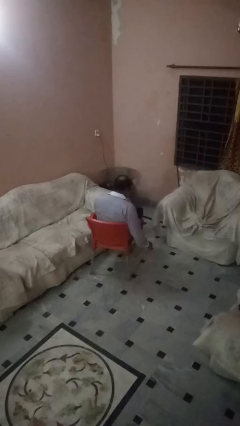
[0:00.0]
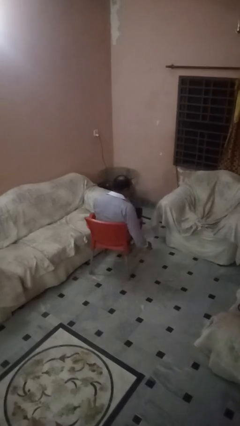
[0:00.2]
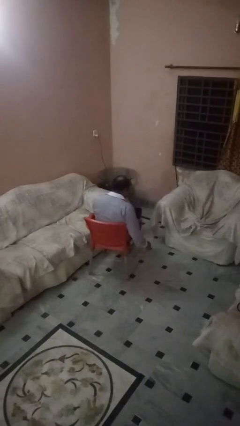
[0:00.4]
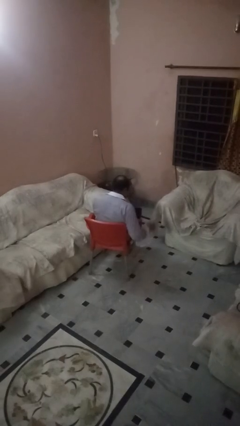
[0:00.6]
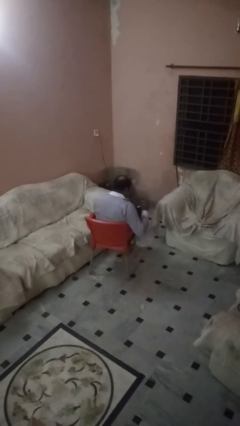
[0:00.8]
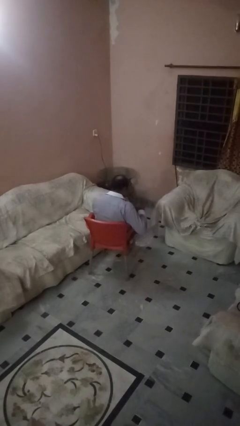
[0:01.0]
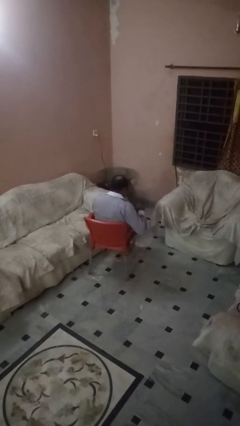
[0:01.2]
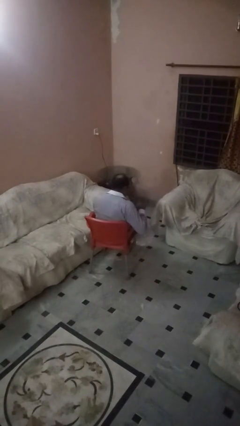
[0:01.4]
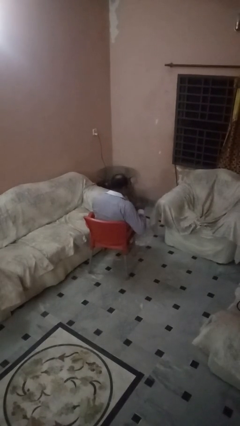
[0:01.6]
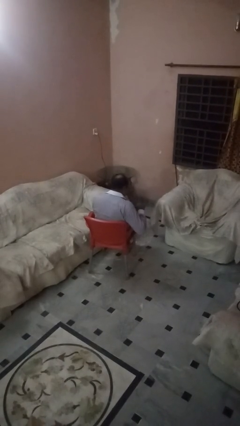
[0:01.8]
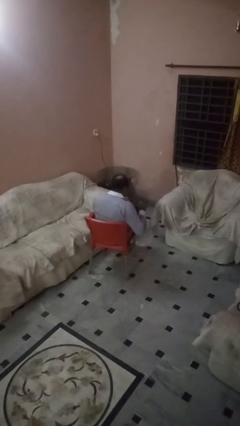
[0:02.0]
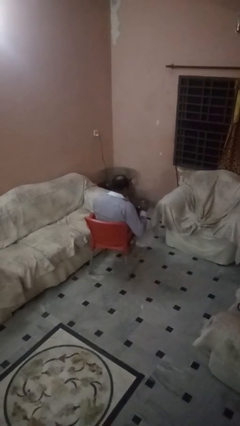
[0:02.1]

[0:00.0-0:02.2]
person stirs mug

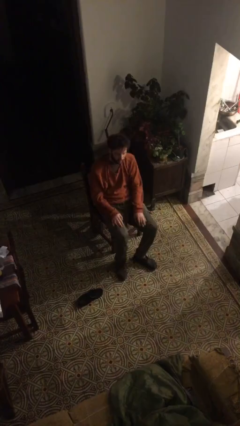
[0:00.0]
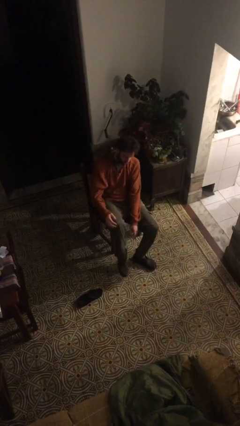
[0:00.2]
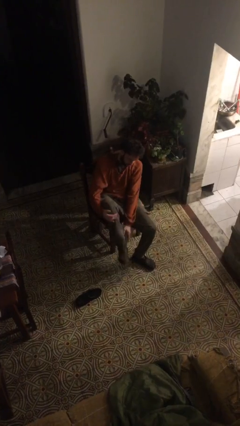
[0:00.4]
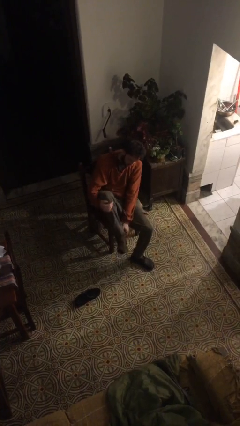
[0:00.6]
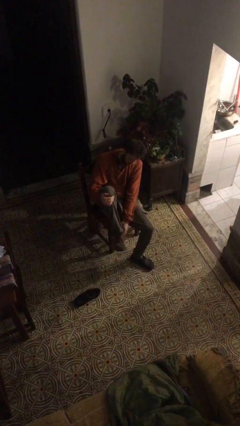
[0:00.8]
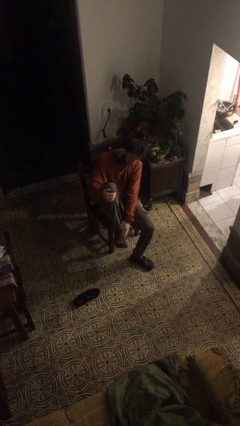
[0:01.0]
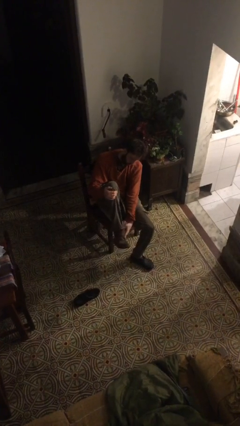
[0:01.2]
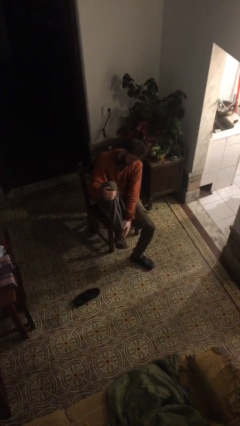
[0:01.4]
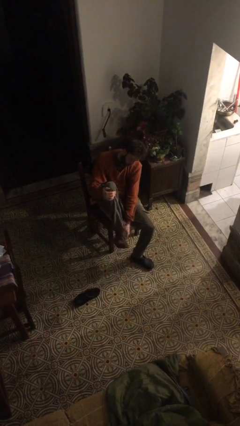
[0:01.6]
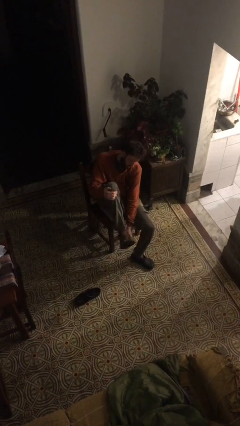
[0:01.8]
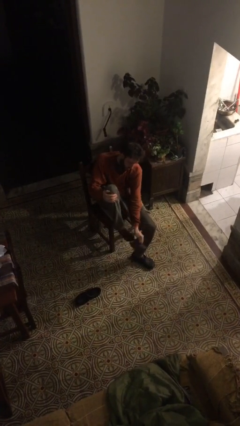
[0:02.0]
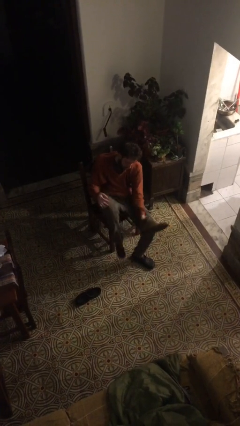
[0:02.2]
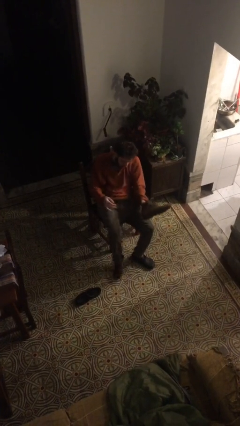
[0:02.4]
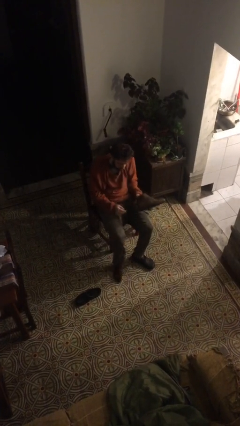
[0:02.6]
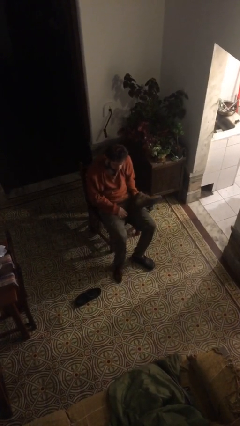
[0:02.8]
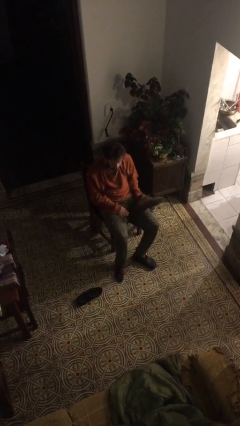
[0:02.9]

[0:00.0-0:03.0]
person takes off boots

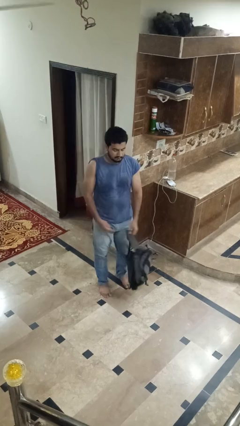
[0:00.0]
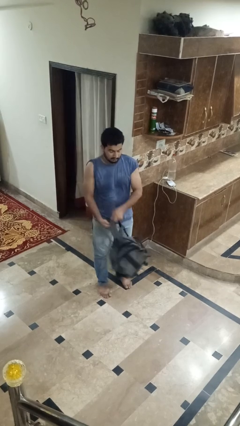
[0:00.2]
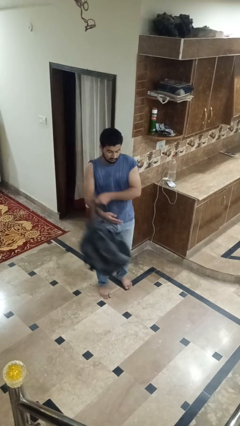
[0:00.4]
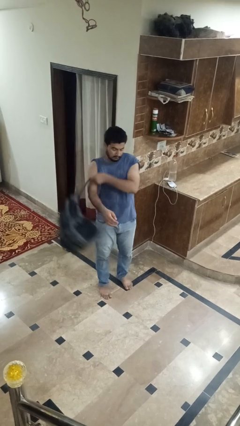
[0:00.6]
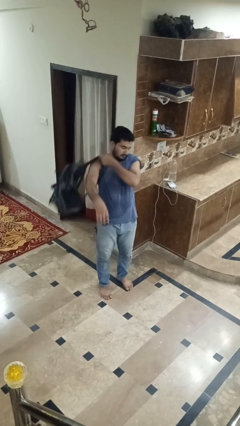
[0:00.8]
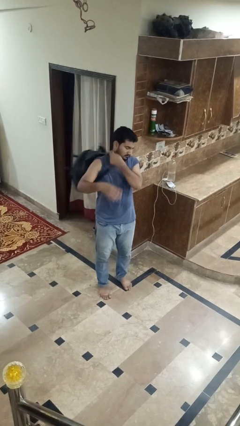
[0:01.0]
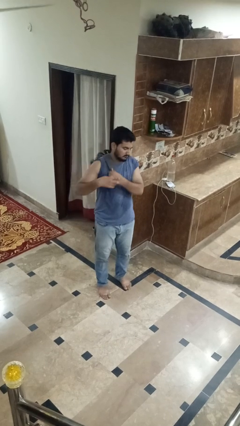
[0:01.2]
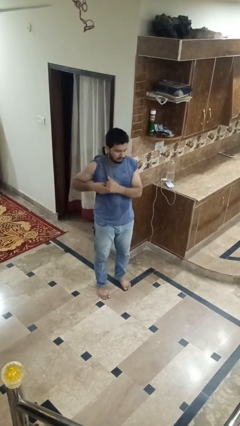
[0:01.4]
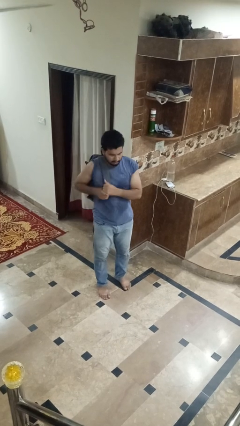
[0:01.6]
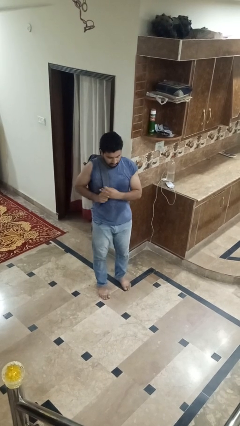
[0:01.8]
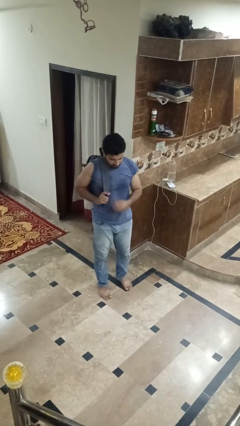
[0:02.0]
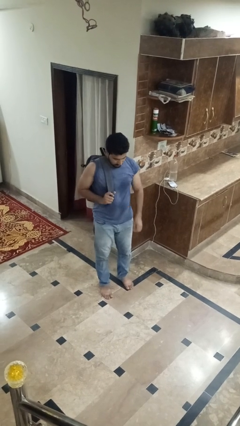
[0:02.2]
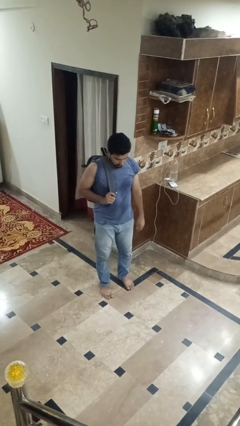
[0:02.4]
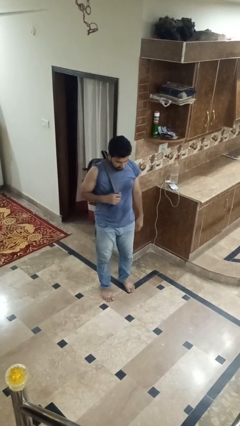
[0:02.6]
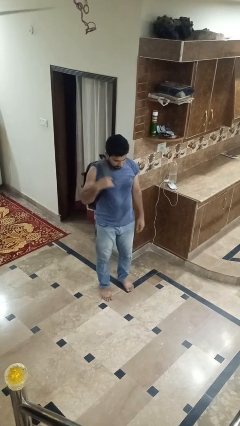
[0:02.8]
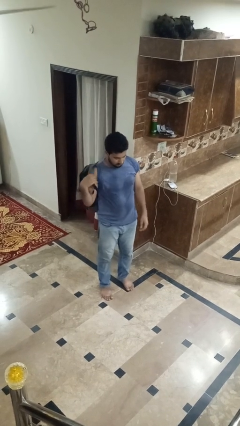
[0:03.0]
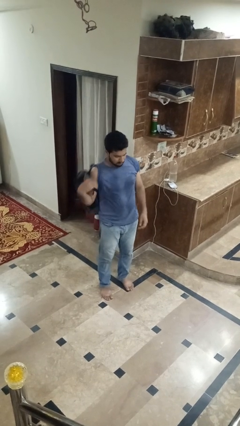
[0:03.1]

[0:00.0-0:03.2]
person puts on backpack

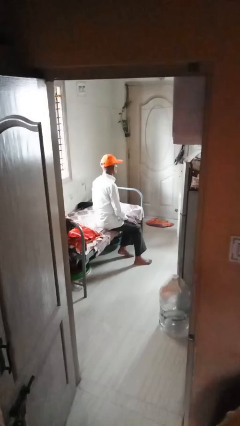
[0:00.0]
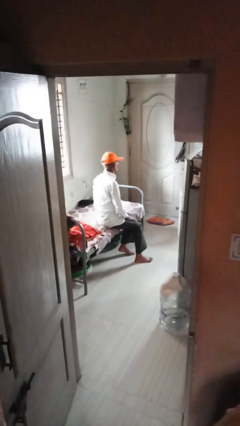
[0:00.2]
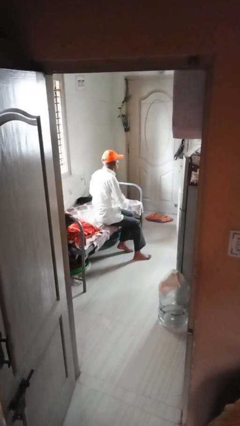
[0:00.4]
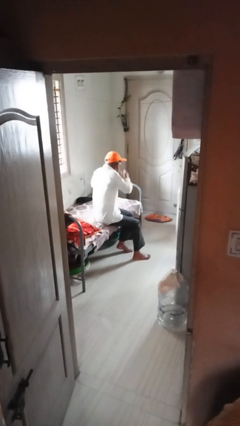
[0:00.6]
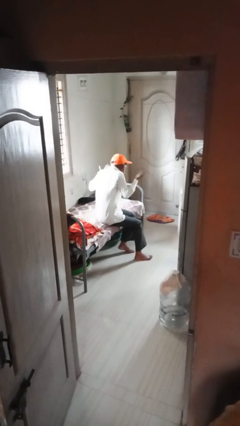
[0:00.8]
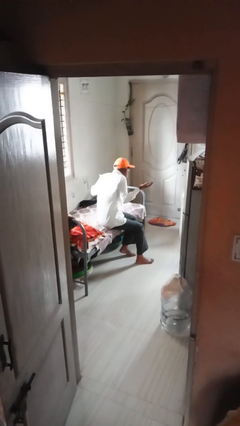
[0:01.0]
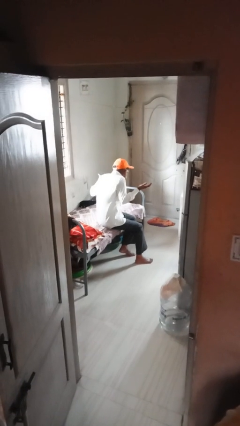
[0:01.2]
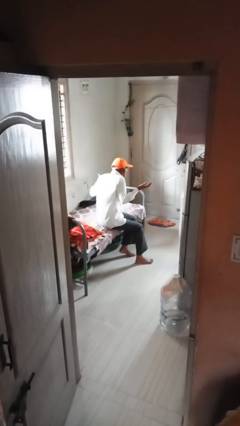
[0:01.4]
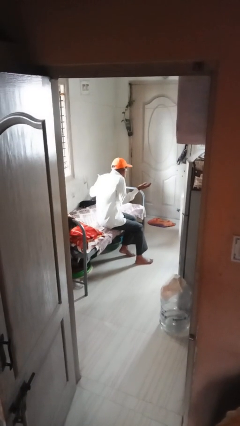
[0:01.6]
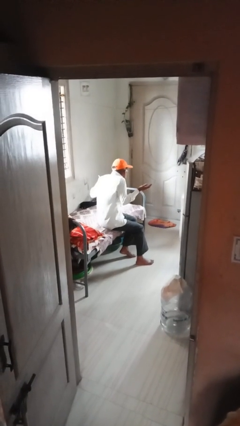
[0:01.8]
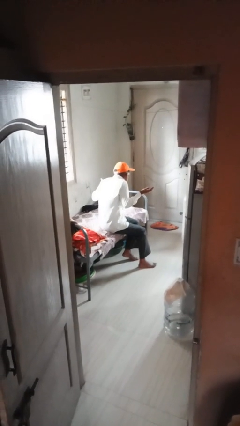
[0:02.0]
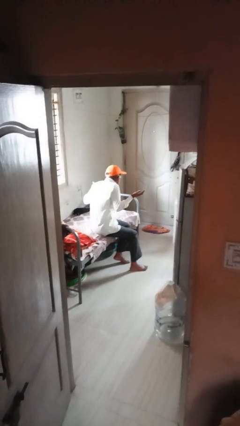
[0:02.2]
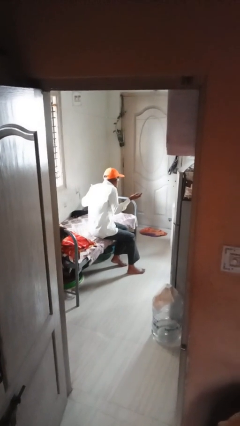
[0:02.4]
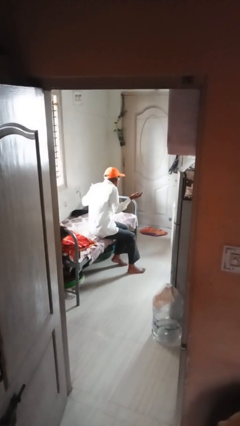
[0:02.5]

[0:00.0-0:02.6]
person shrugs

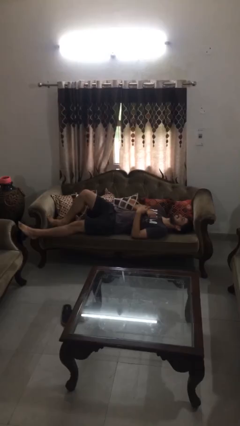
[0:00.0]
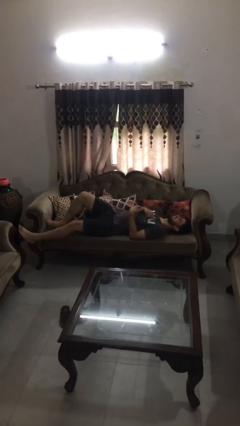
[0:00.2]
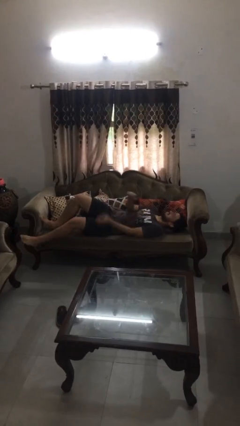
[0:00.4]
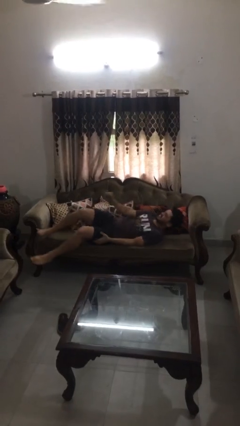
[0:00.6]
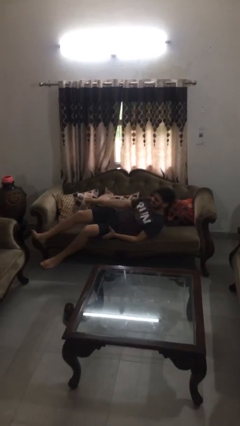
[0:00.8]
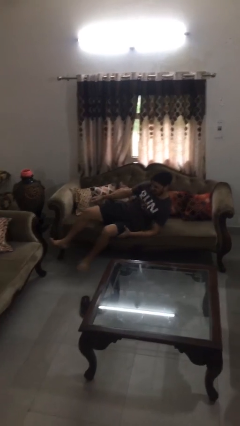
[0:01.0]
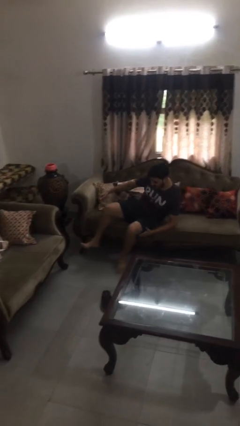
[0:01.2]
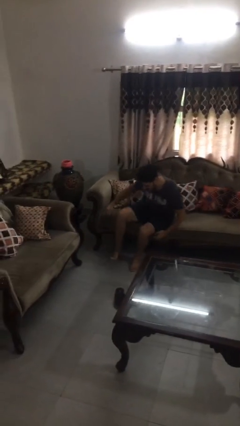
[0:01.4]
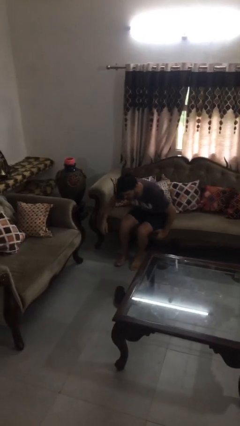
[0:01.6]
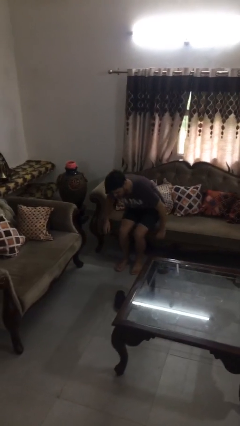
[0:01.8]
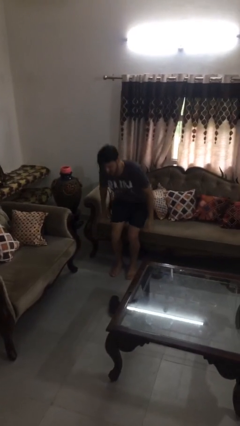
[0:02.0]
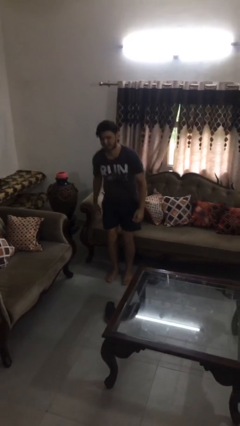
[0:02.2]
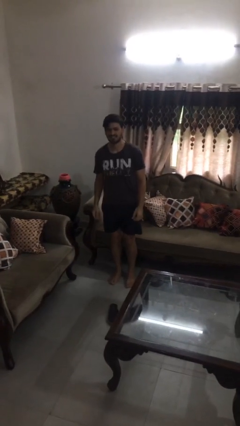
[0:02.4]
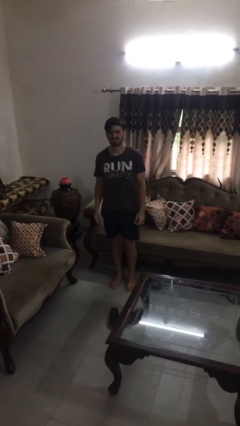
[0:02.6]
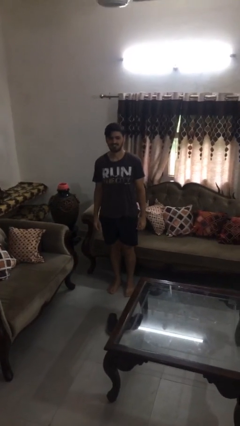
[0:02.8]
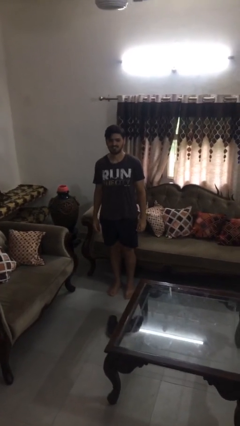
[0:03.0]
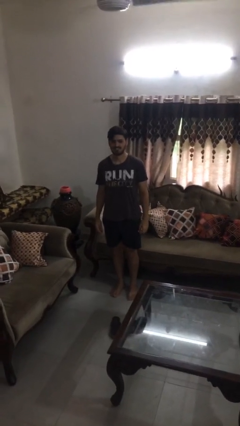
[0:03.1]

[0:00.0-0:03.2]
person stands up

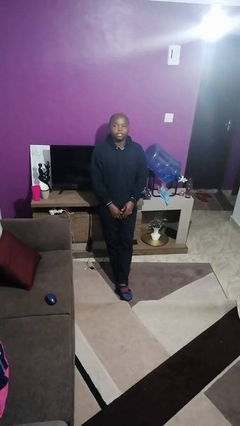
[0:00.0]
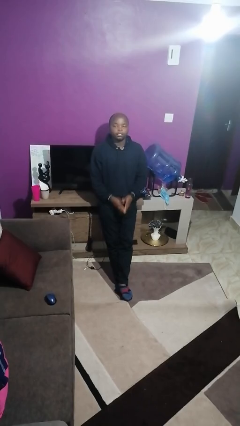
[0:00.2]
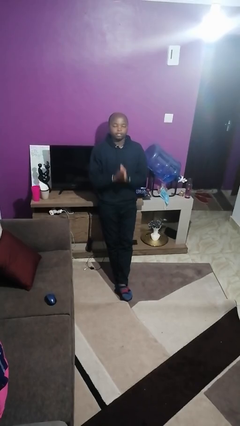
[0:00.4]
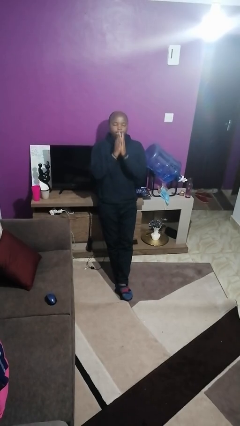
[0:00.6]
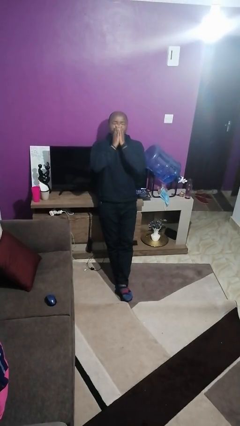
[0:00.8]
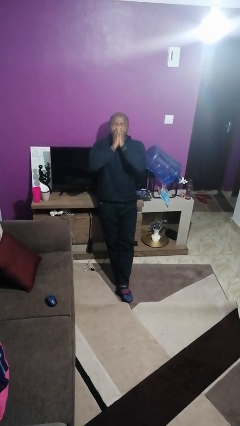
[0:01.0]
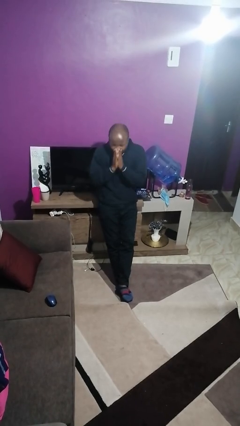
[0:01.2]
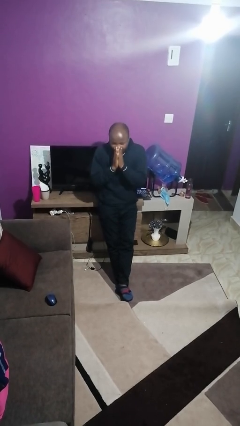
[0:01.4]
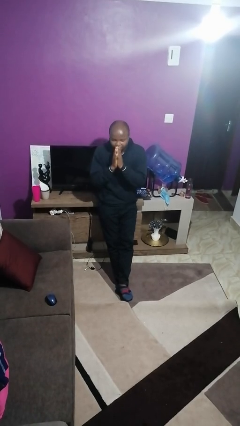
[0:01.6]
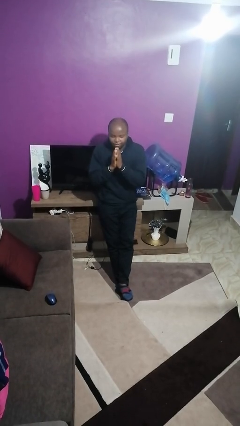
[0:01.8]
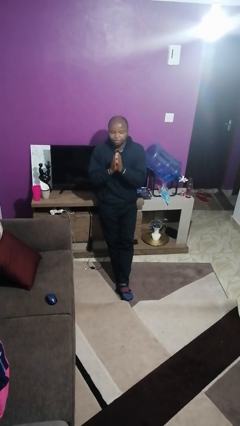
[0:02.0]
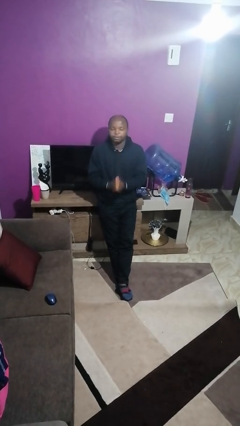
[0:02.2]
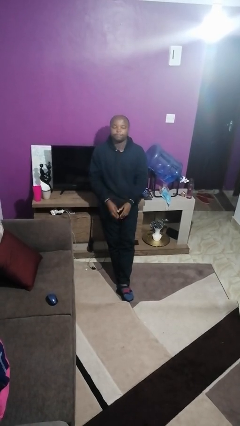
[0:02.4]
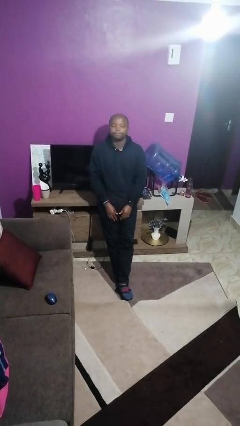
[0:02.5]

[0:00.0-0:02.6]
person sneezes into hand

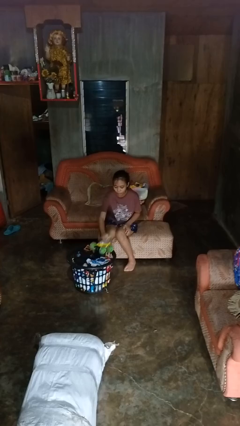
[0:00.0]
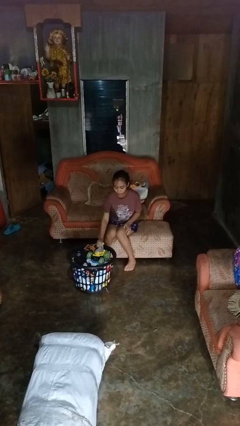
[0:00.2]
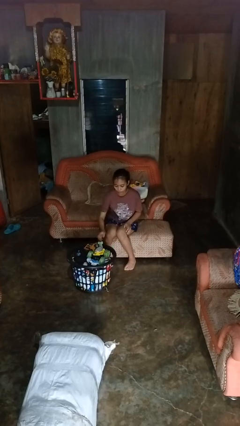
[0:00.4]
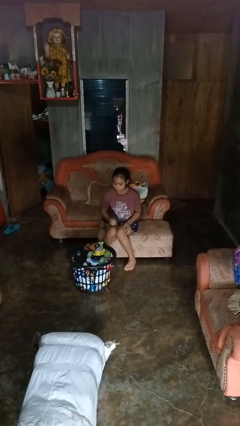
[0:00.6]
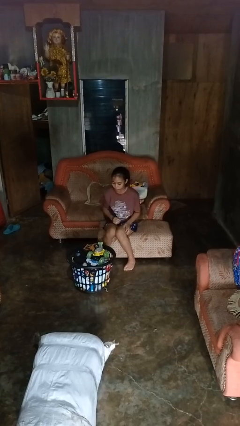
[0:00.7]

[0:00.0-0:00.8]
person puts object into basket
